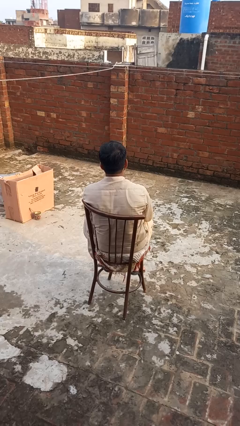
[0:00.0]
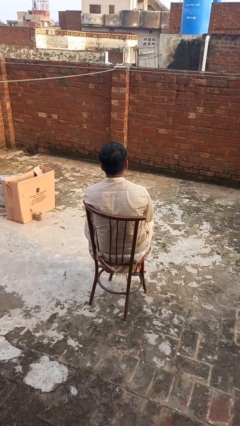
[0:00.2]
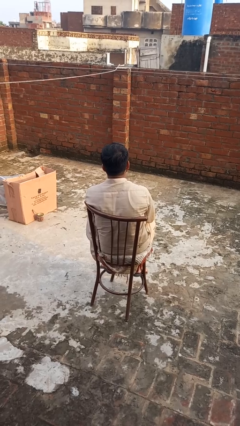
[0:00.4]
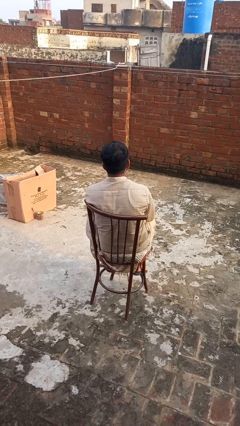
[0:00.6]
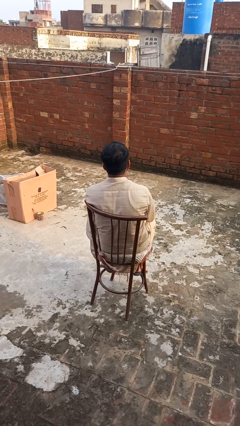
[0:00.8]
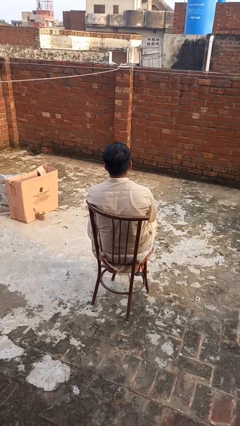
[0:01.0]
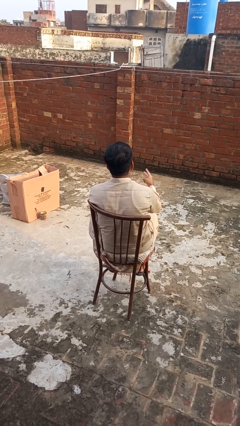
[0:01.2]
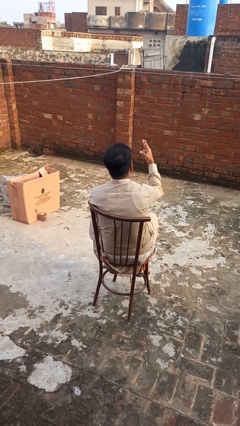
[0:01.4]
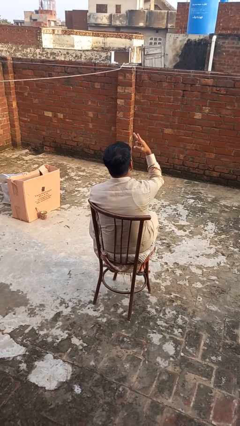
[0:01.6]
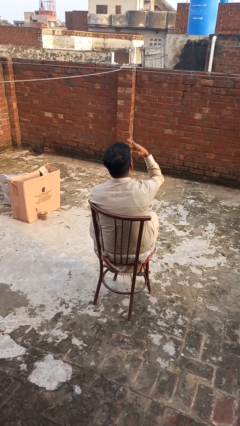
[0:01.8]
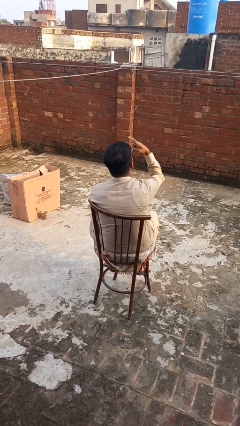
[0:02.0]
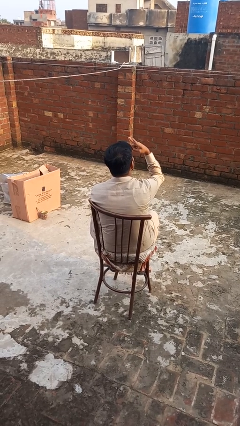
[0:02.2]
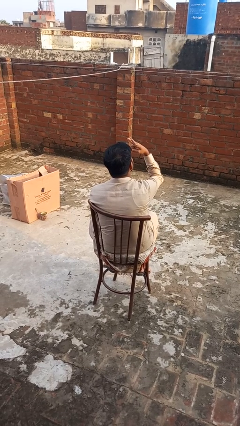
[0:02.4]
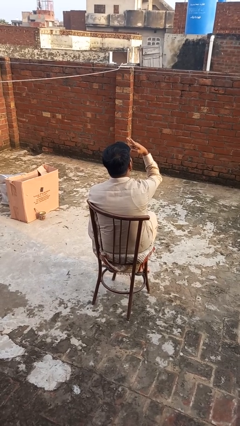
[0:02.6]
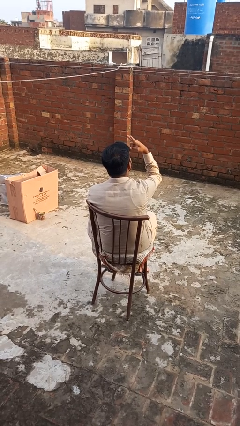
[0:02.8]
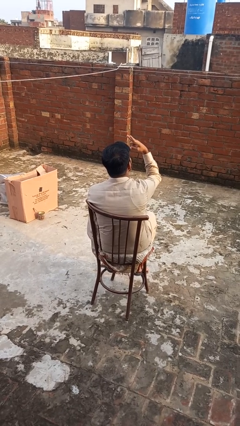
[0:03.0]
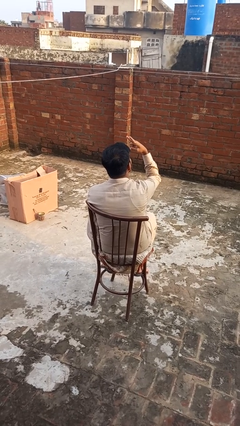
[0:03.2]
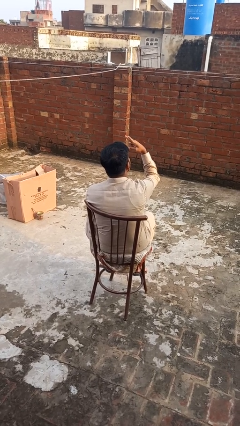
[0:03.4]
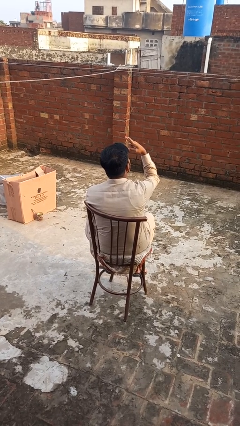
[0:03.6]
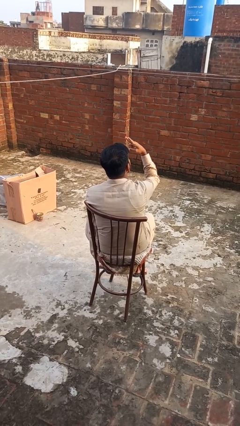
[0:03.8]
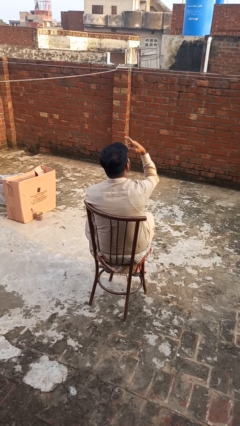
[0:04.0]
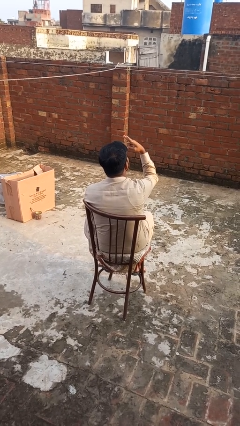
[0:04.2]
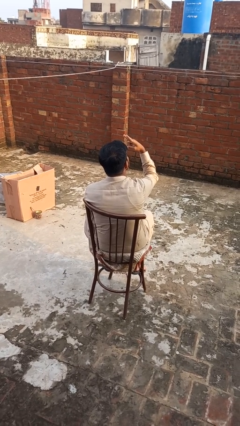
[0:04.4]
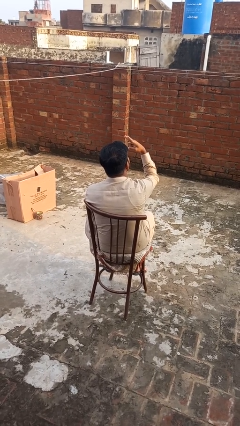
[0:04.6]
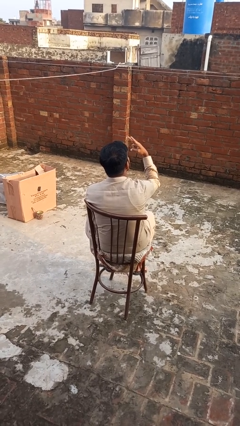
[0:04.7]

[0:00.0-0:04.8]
person gestures watch closely

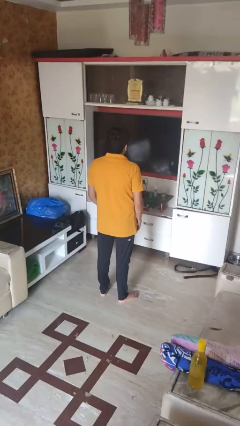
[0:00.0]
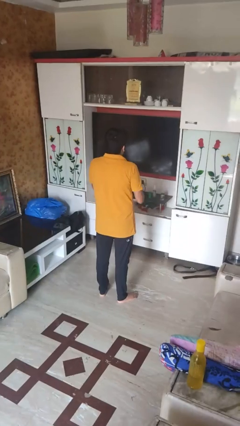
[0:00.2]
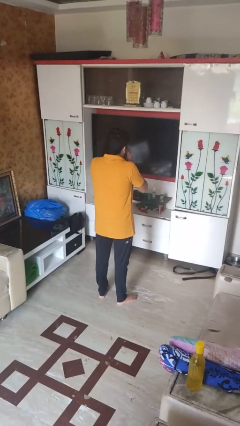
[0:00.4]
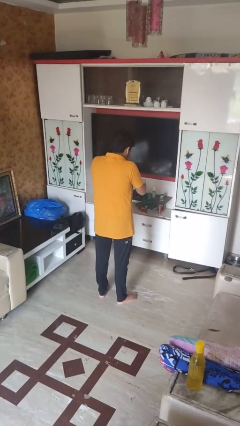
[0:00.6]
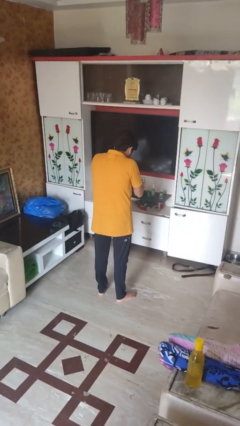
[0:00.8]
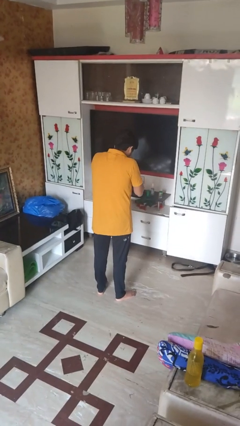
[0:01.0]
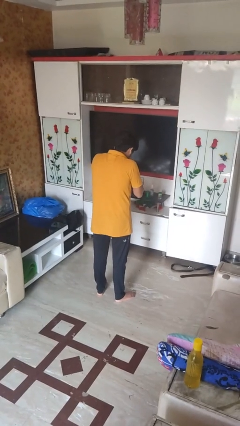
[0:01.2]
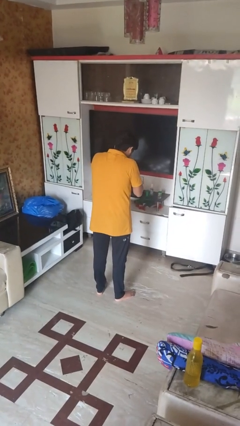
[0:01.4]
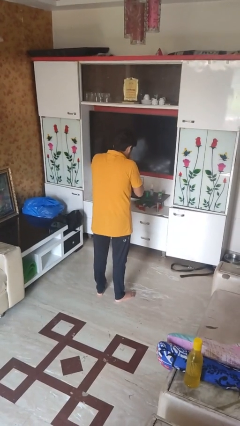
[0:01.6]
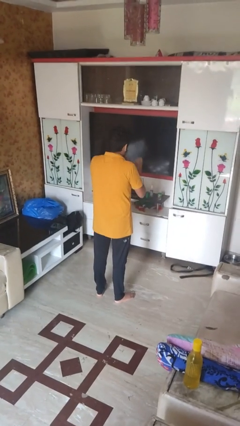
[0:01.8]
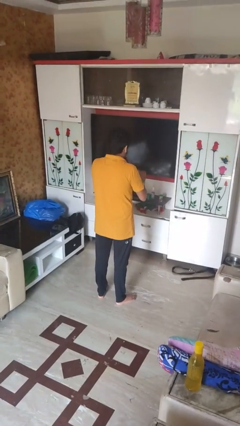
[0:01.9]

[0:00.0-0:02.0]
person sneezes into hand

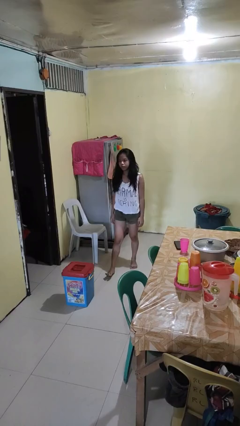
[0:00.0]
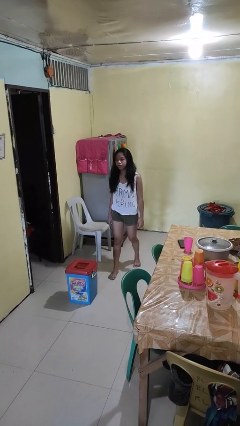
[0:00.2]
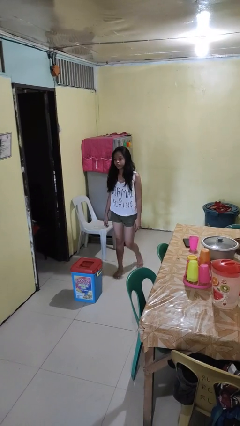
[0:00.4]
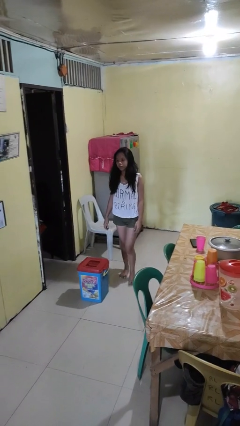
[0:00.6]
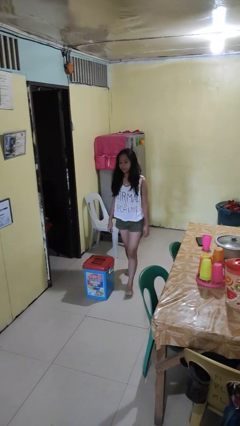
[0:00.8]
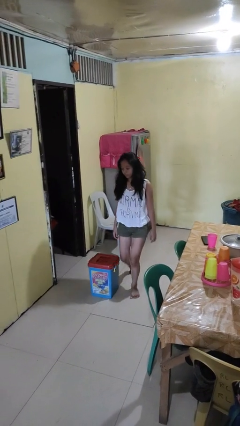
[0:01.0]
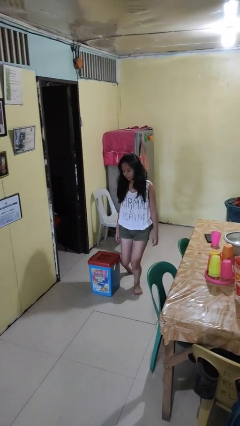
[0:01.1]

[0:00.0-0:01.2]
person trips on object on floor

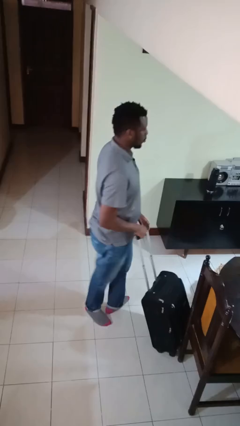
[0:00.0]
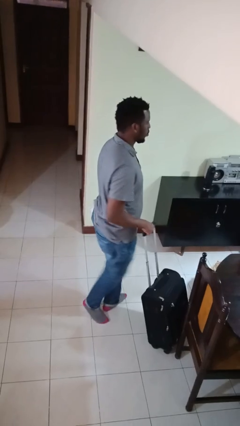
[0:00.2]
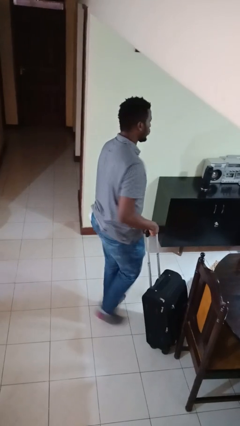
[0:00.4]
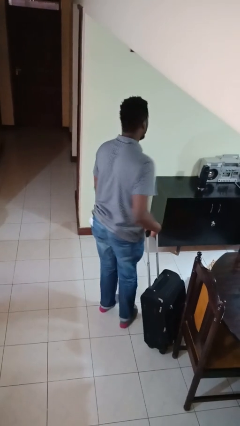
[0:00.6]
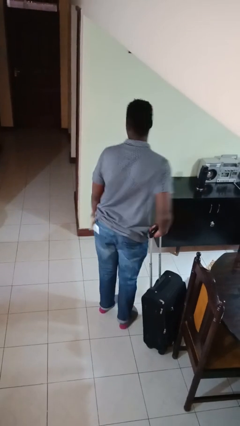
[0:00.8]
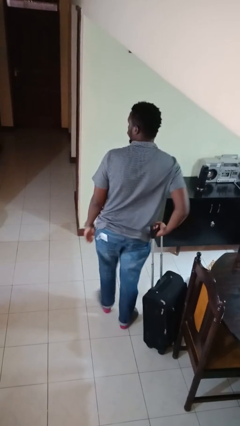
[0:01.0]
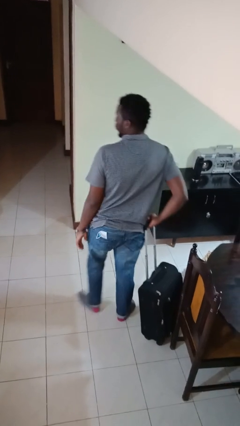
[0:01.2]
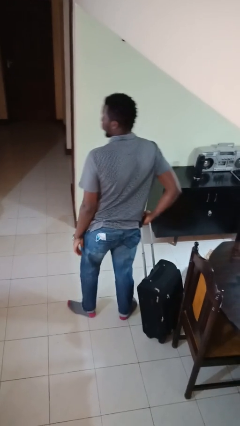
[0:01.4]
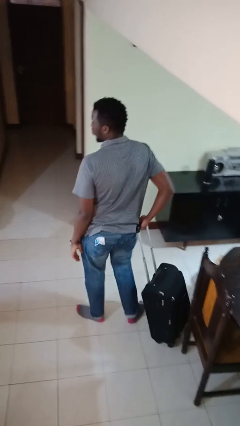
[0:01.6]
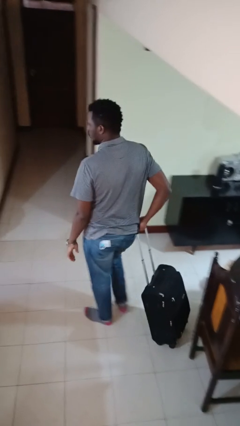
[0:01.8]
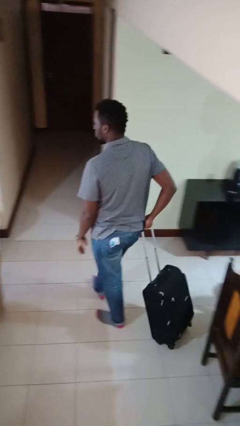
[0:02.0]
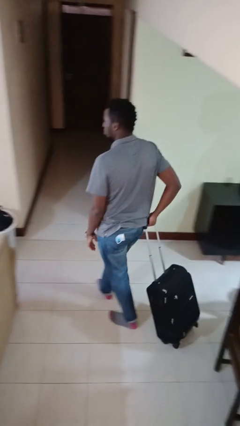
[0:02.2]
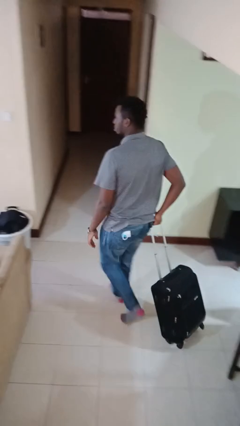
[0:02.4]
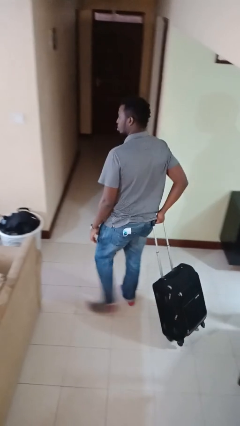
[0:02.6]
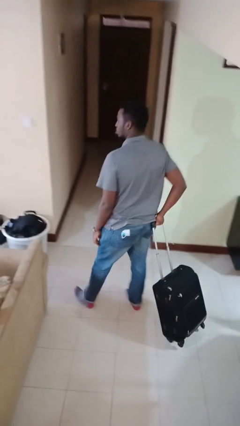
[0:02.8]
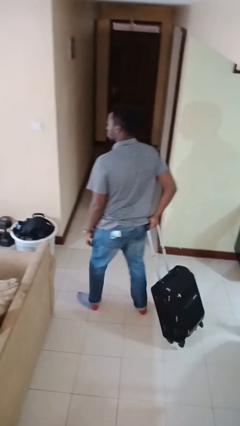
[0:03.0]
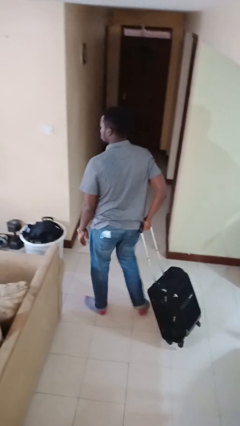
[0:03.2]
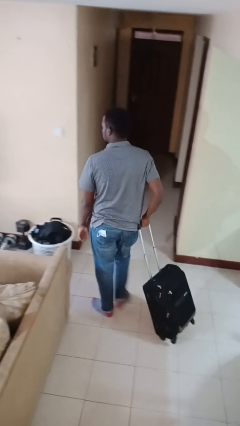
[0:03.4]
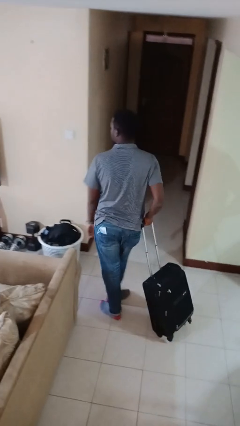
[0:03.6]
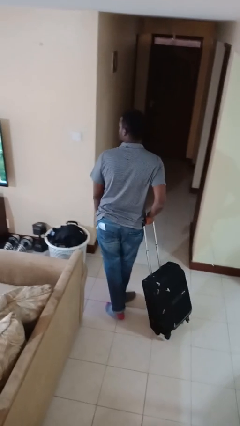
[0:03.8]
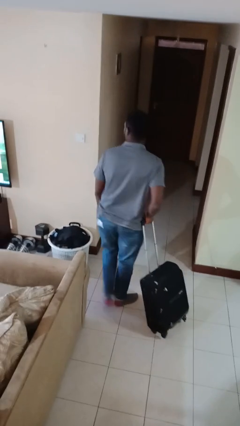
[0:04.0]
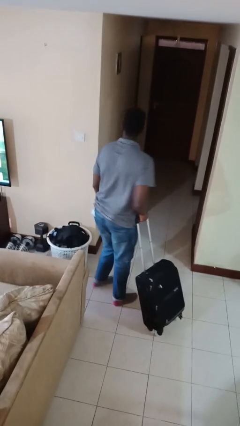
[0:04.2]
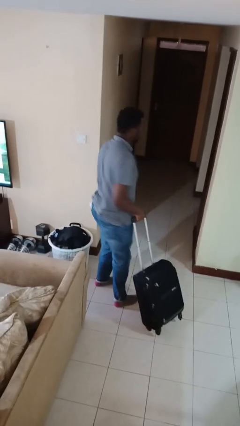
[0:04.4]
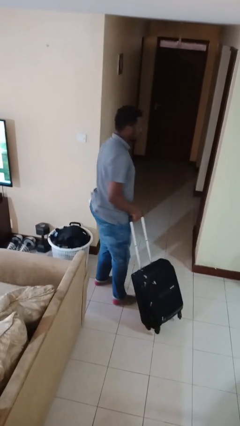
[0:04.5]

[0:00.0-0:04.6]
person pulls wheeled cart

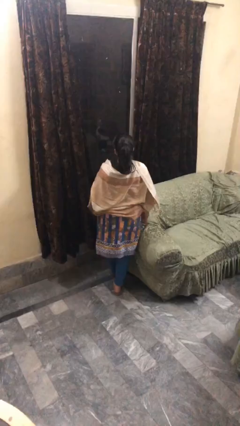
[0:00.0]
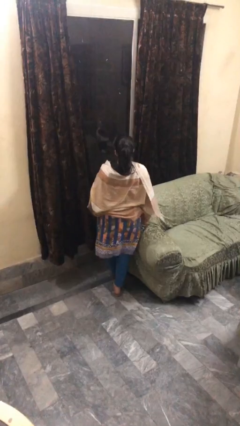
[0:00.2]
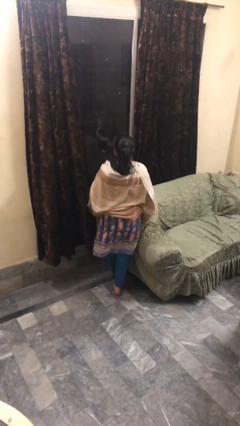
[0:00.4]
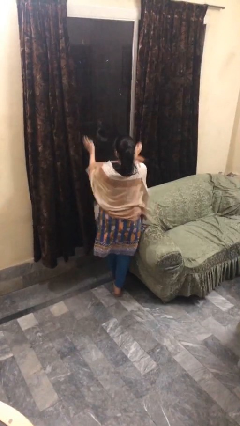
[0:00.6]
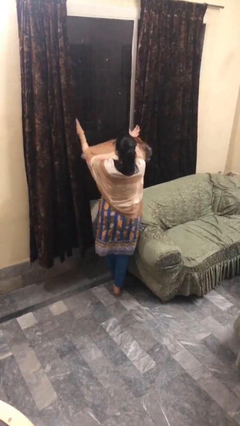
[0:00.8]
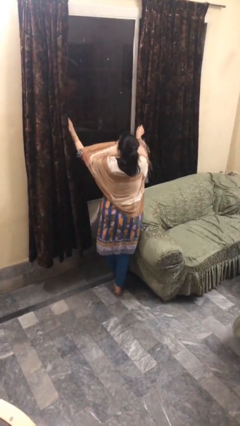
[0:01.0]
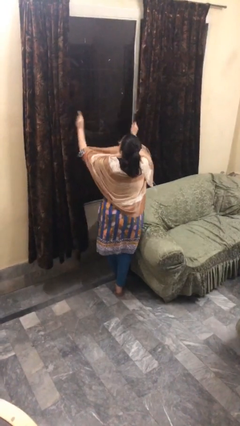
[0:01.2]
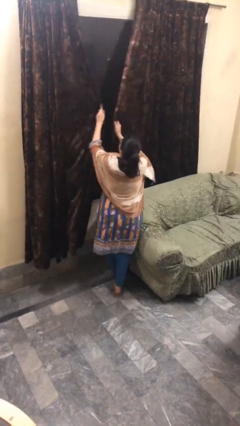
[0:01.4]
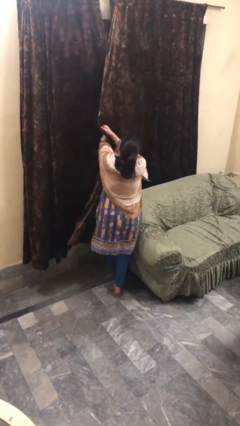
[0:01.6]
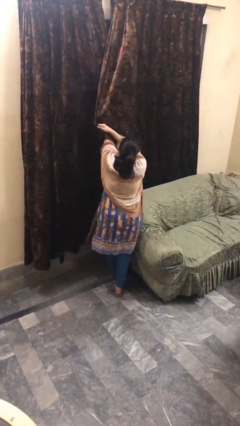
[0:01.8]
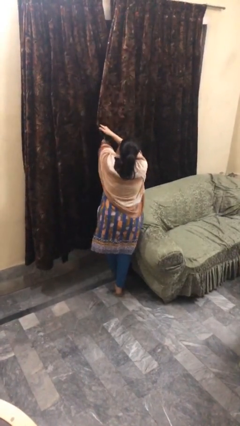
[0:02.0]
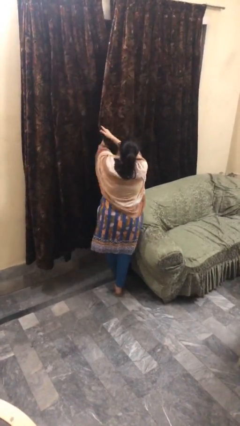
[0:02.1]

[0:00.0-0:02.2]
person closes curtains

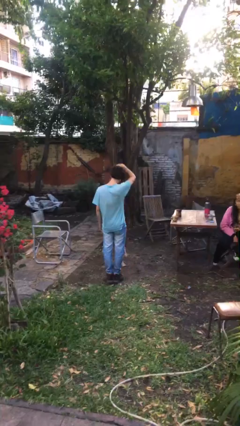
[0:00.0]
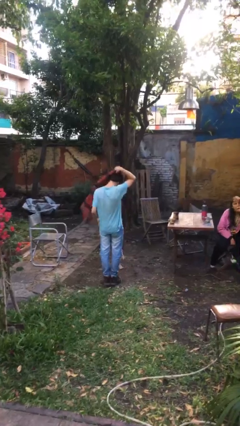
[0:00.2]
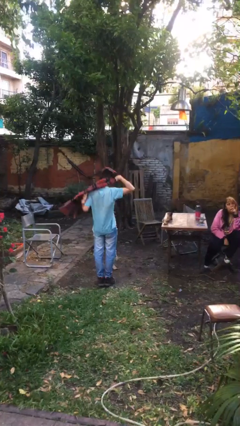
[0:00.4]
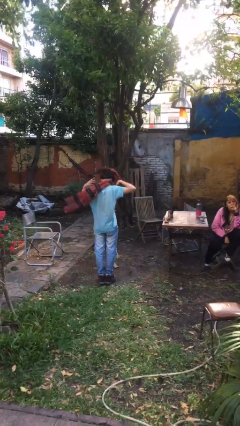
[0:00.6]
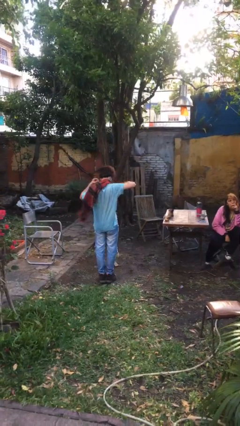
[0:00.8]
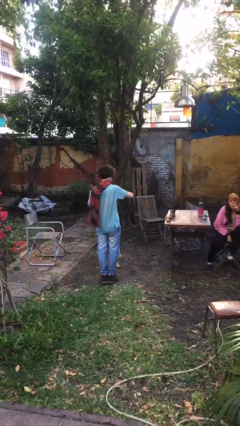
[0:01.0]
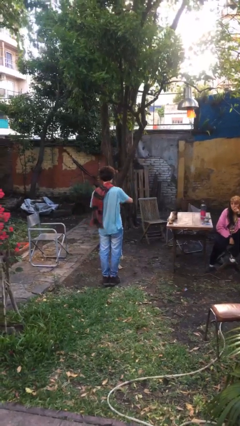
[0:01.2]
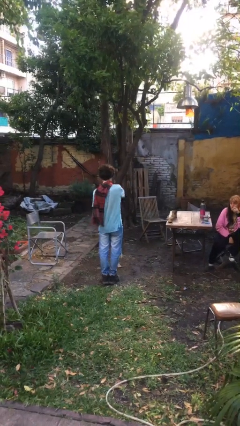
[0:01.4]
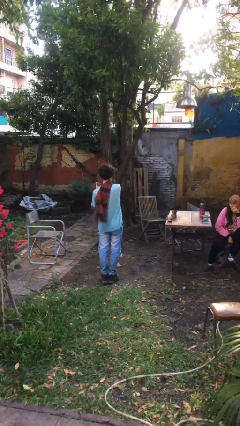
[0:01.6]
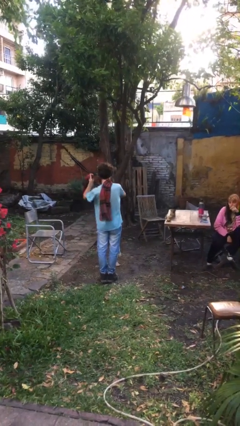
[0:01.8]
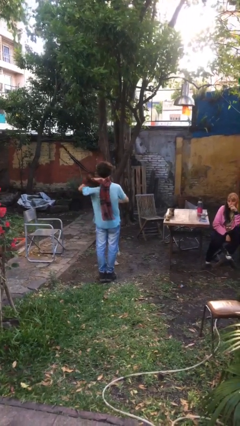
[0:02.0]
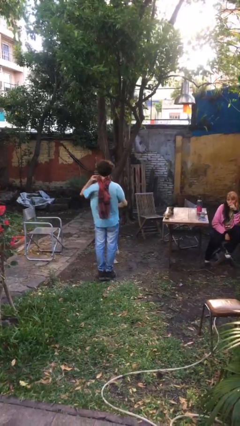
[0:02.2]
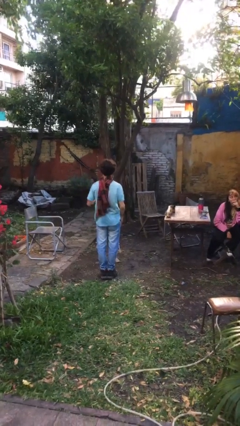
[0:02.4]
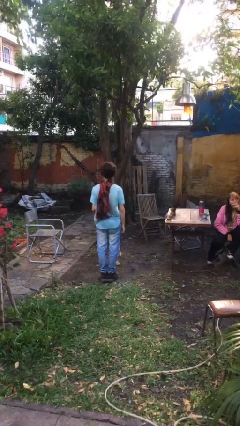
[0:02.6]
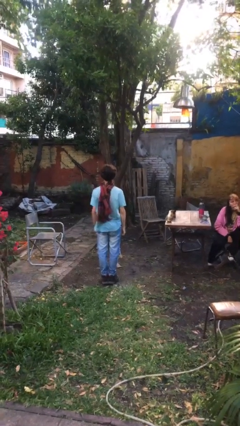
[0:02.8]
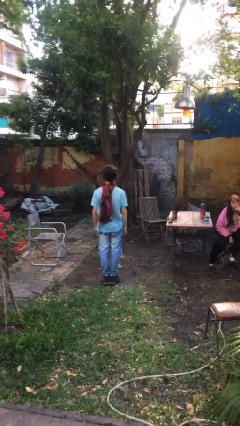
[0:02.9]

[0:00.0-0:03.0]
person puts on scarf
